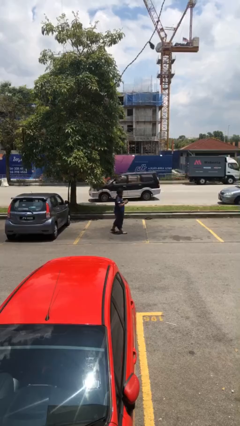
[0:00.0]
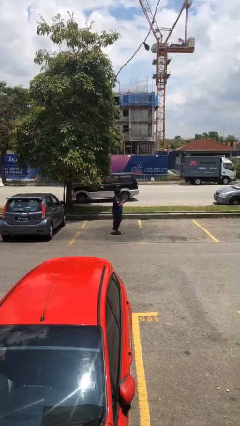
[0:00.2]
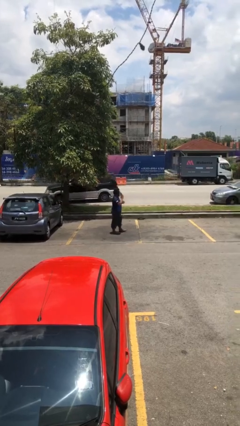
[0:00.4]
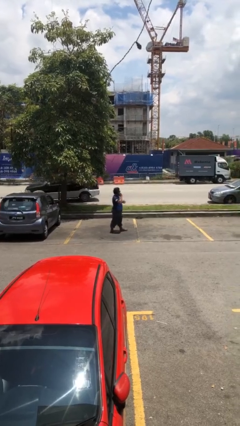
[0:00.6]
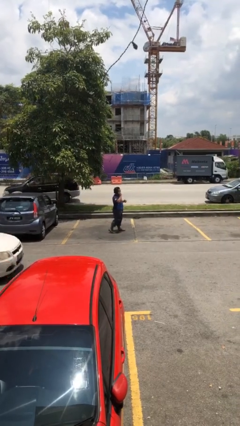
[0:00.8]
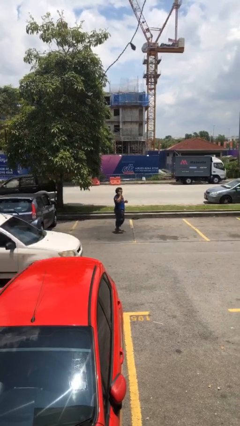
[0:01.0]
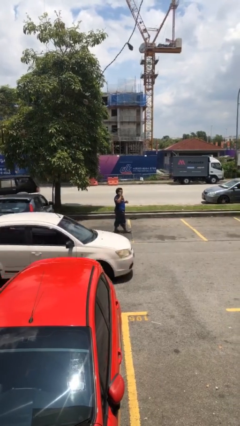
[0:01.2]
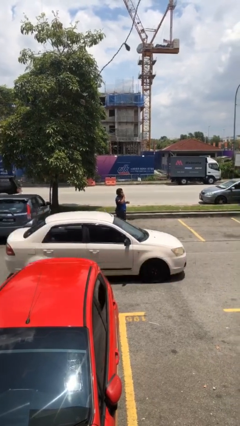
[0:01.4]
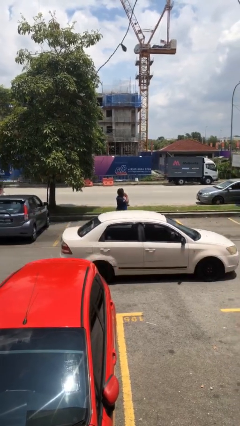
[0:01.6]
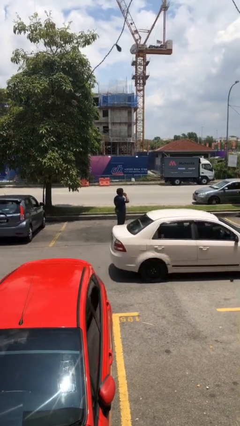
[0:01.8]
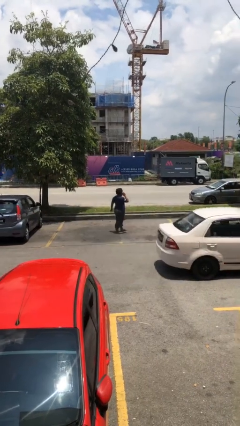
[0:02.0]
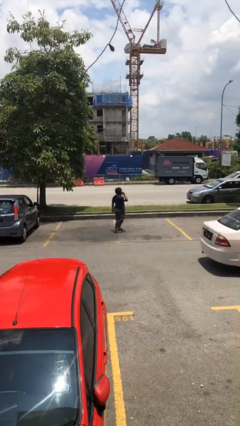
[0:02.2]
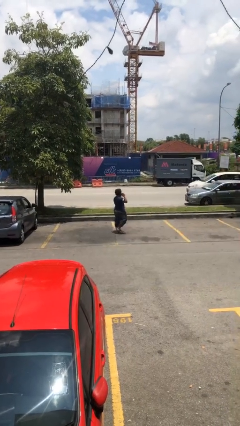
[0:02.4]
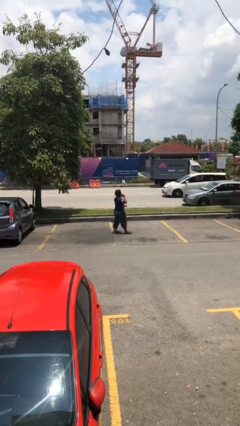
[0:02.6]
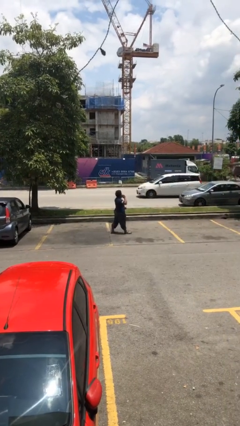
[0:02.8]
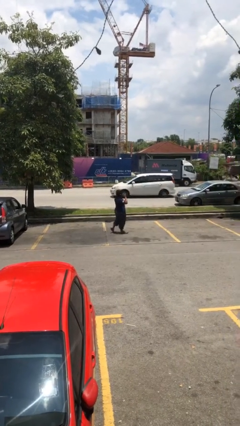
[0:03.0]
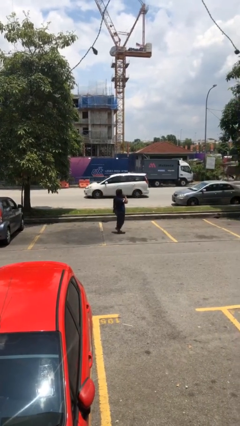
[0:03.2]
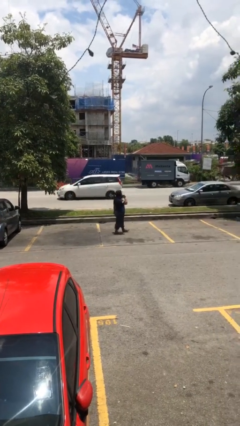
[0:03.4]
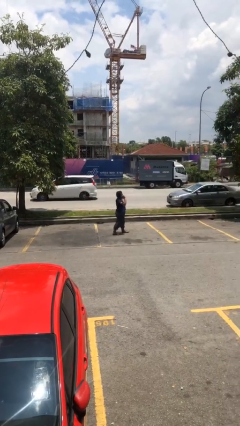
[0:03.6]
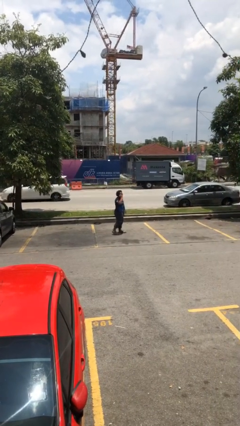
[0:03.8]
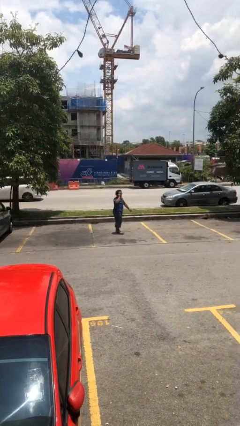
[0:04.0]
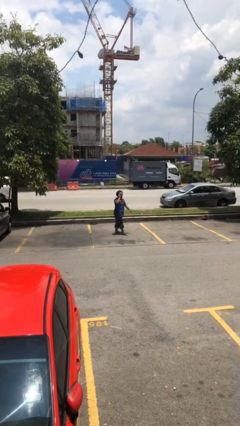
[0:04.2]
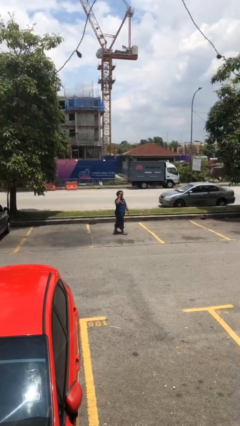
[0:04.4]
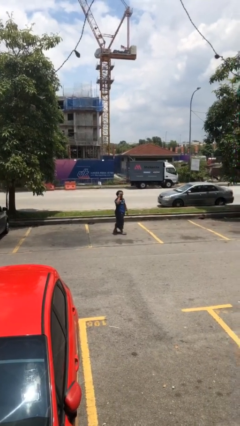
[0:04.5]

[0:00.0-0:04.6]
person talks on phone

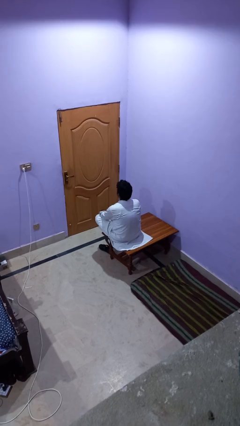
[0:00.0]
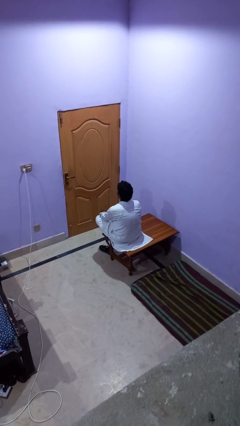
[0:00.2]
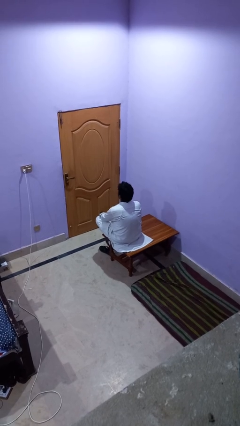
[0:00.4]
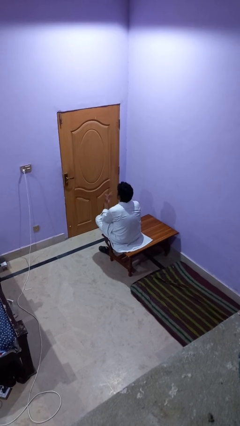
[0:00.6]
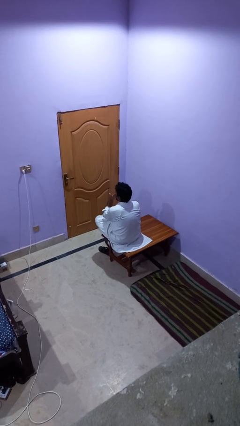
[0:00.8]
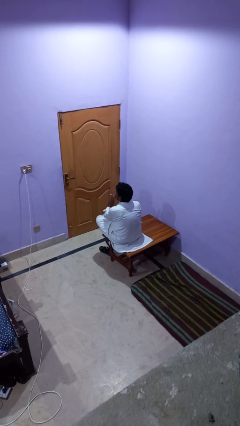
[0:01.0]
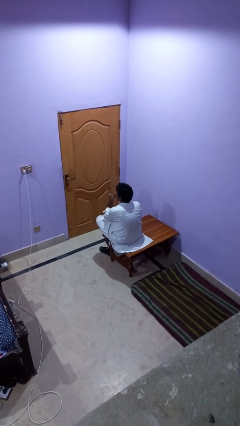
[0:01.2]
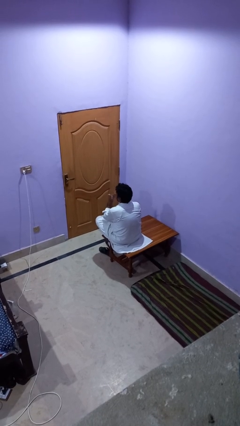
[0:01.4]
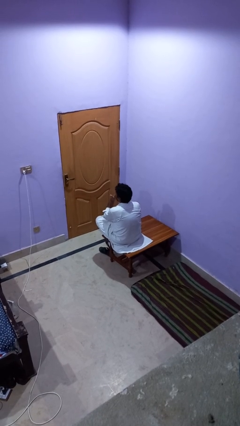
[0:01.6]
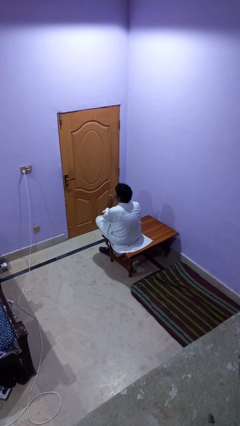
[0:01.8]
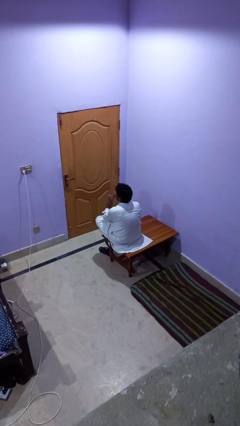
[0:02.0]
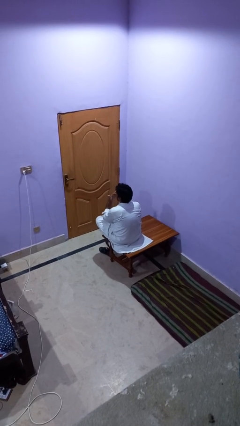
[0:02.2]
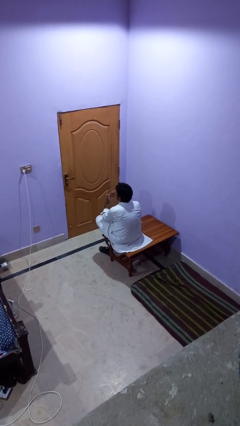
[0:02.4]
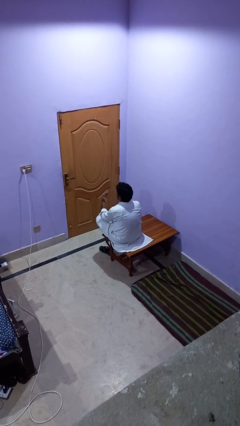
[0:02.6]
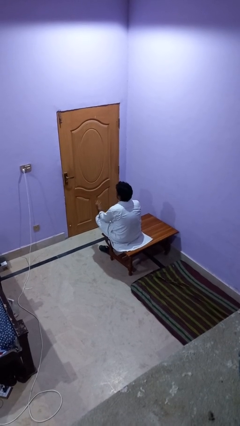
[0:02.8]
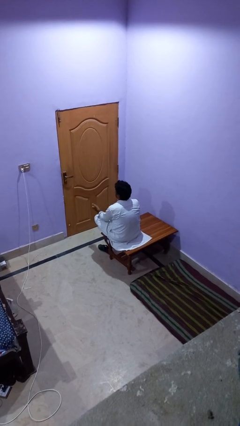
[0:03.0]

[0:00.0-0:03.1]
person licks fingers

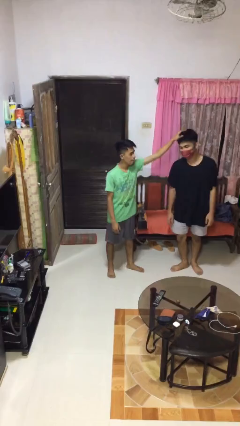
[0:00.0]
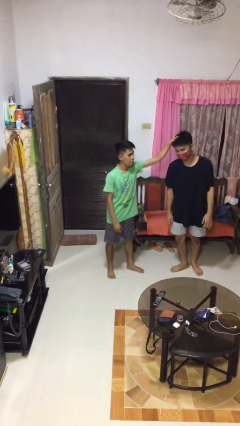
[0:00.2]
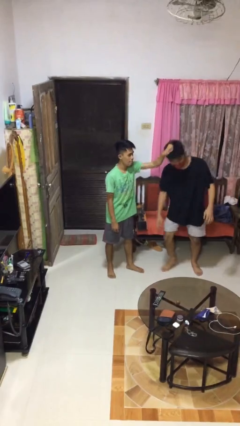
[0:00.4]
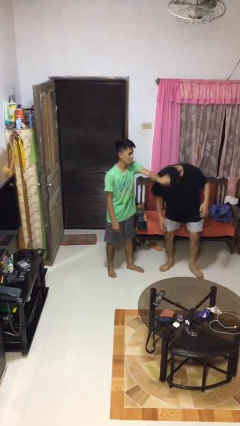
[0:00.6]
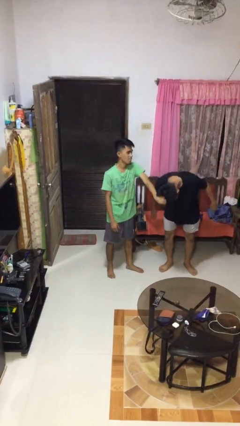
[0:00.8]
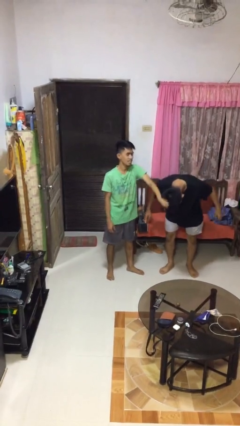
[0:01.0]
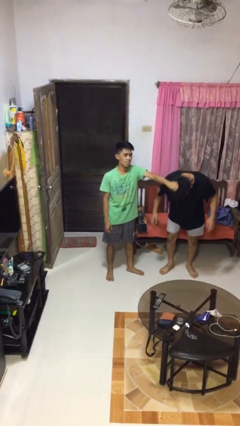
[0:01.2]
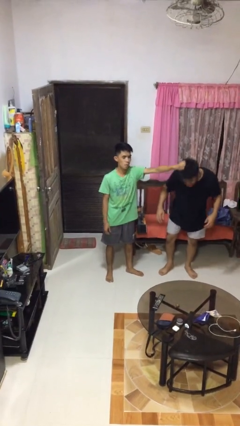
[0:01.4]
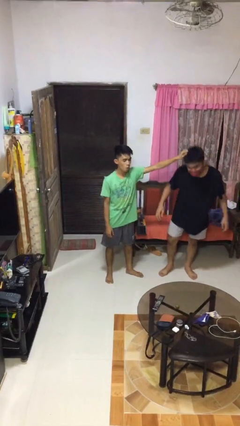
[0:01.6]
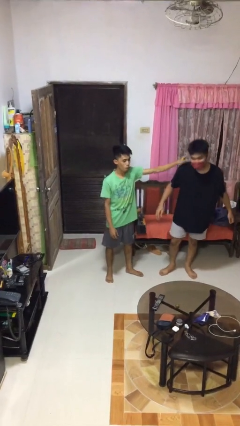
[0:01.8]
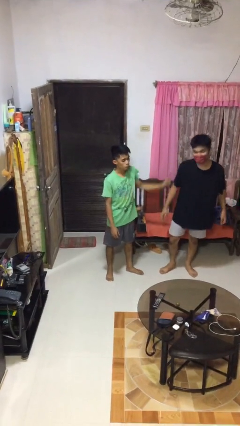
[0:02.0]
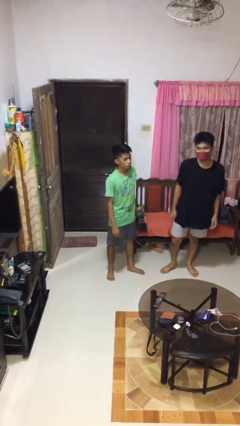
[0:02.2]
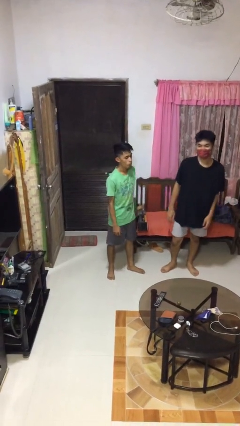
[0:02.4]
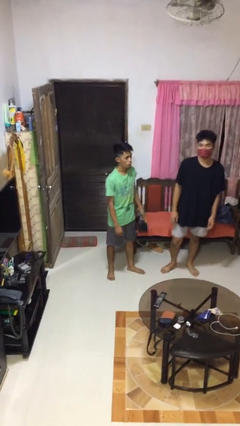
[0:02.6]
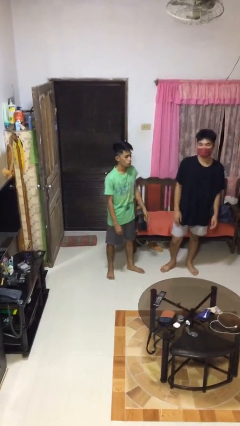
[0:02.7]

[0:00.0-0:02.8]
person grabs person by hair

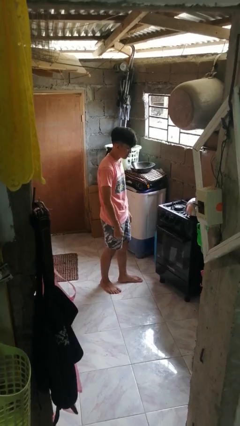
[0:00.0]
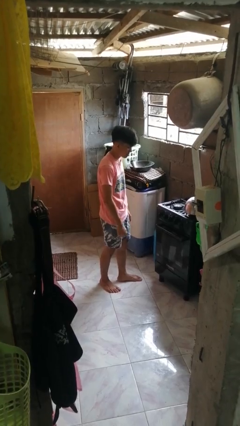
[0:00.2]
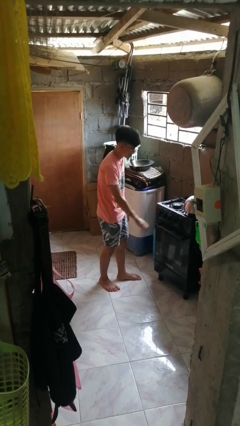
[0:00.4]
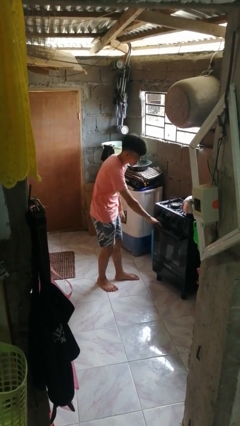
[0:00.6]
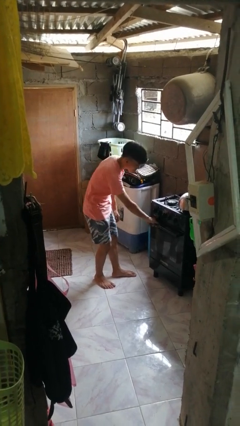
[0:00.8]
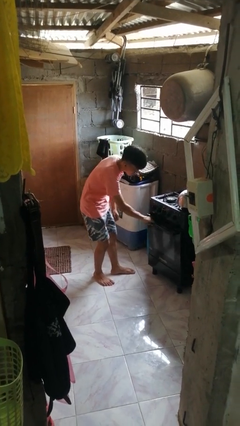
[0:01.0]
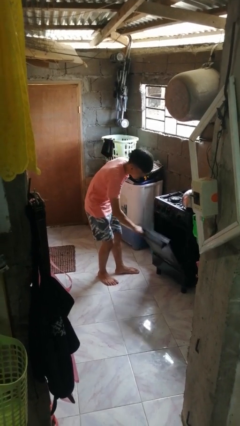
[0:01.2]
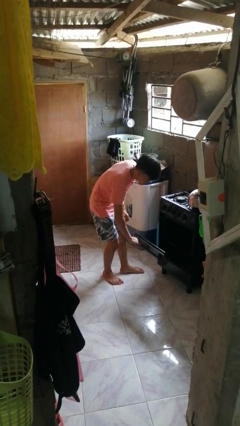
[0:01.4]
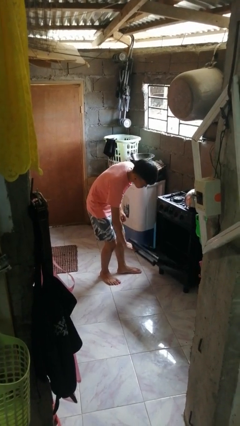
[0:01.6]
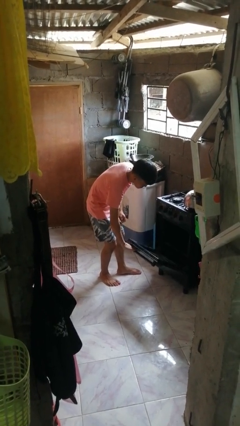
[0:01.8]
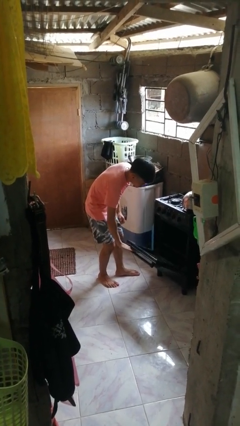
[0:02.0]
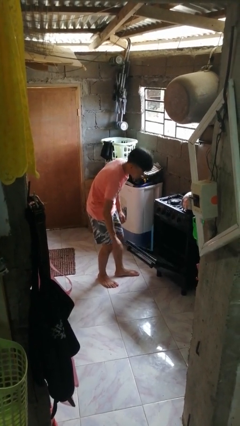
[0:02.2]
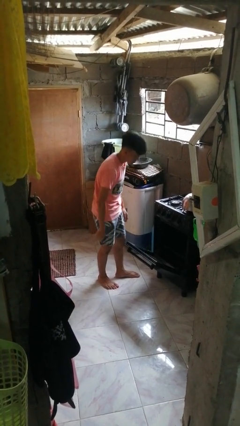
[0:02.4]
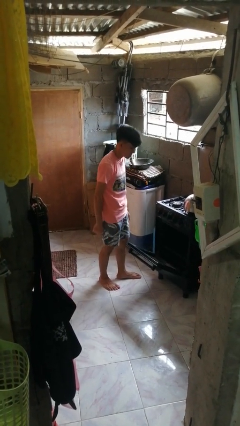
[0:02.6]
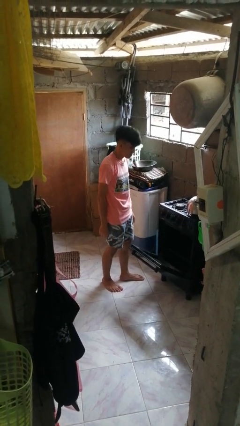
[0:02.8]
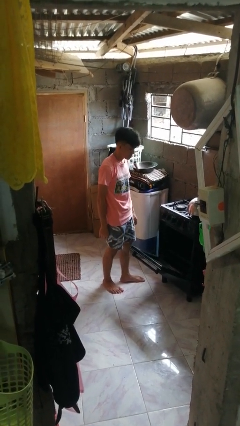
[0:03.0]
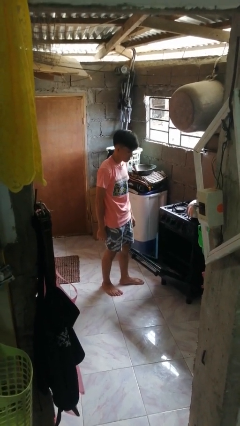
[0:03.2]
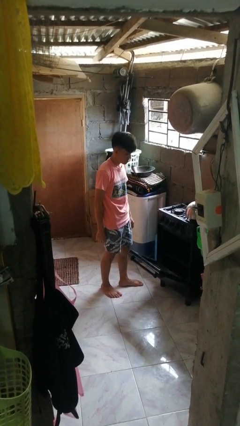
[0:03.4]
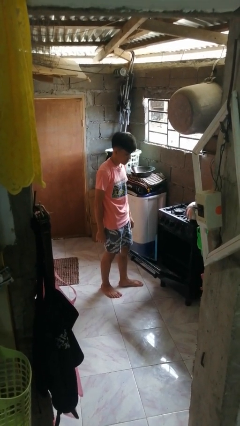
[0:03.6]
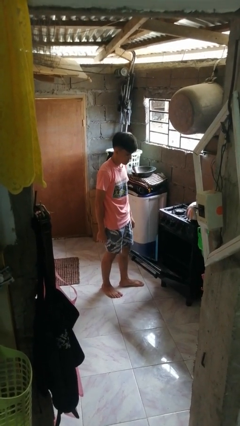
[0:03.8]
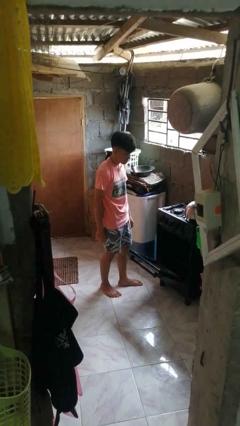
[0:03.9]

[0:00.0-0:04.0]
person opens oven door

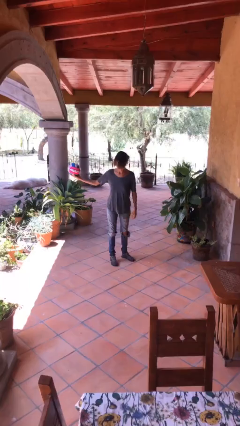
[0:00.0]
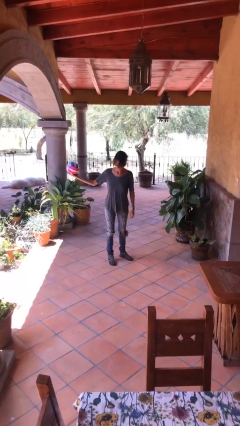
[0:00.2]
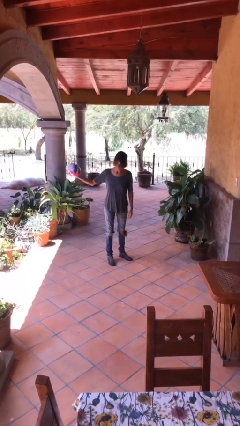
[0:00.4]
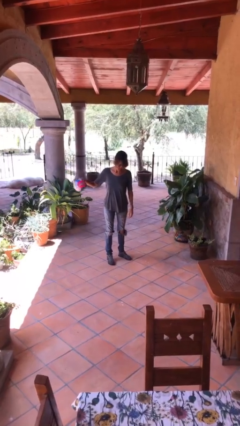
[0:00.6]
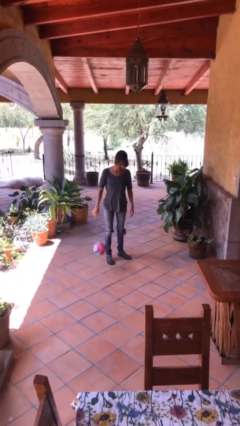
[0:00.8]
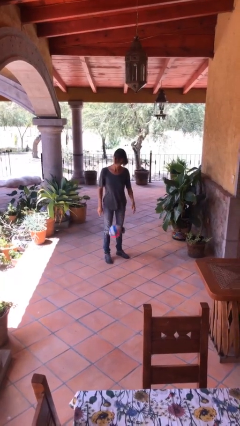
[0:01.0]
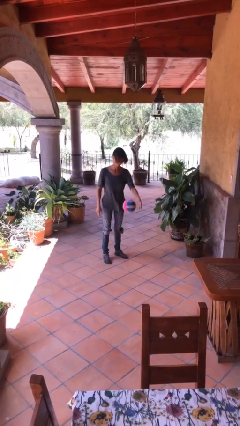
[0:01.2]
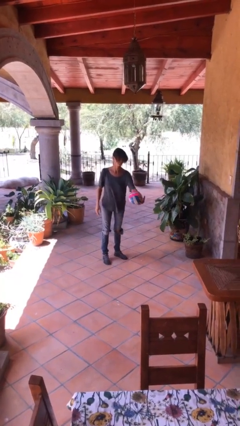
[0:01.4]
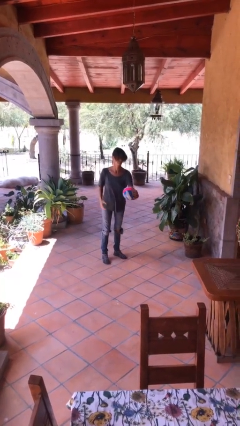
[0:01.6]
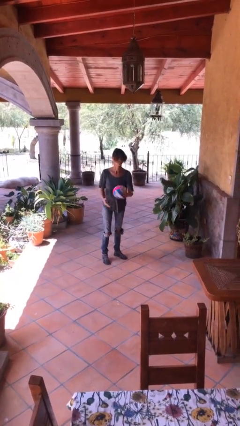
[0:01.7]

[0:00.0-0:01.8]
person bounces ball on floor

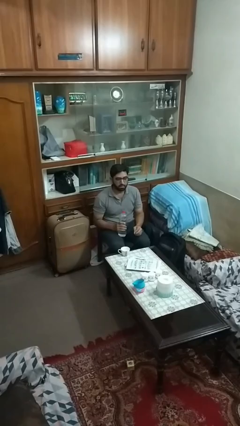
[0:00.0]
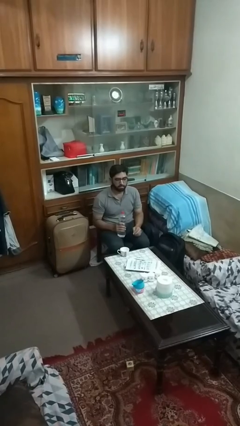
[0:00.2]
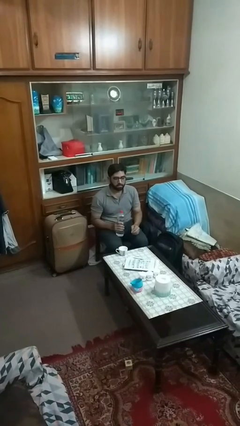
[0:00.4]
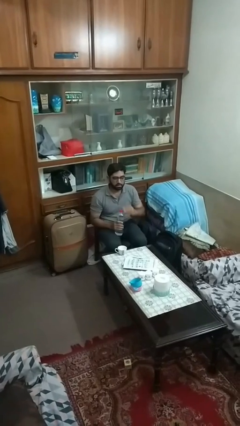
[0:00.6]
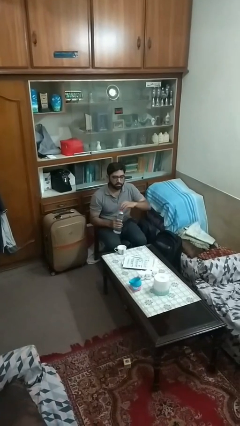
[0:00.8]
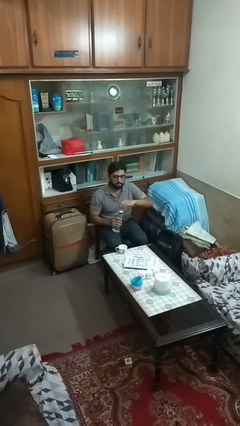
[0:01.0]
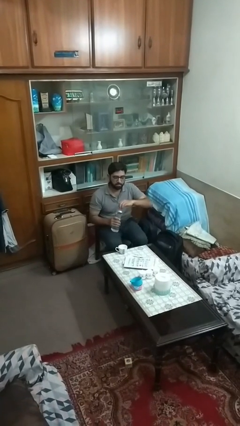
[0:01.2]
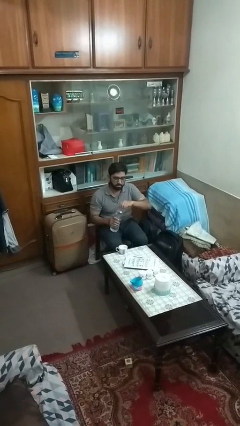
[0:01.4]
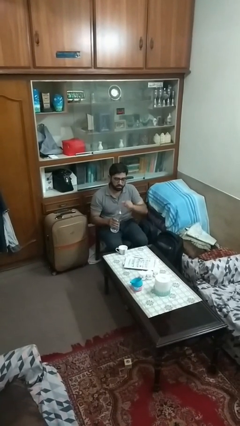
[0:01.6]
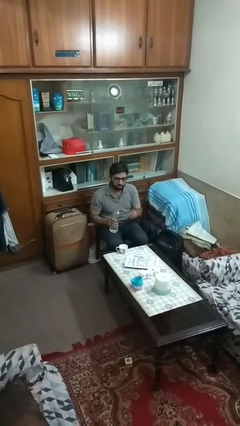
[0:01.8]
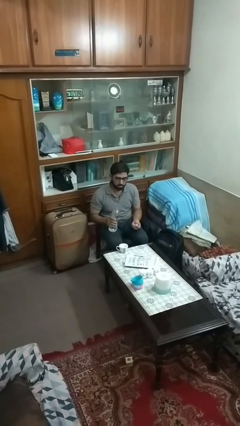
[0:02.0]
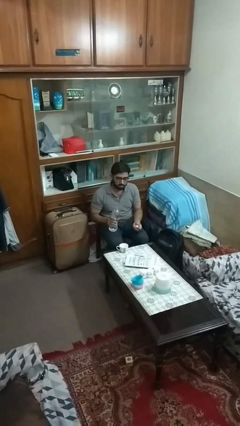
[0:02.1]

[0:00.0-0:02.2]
person unscrews lid from bottle
